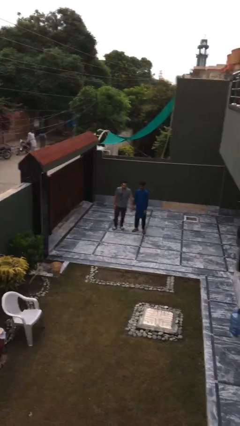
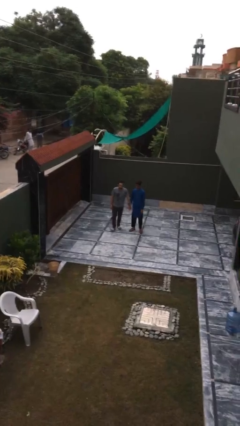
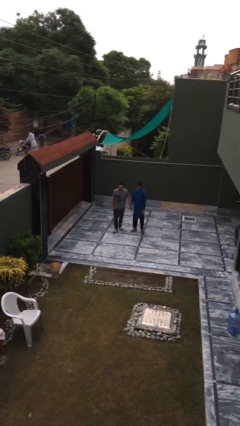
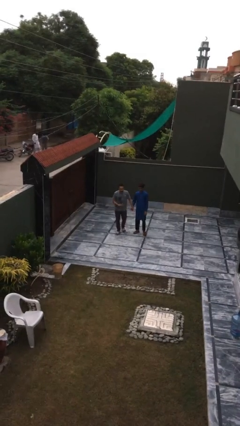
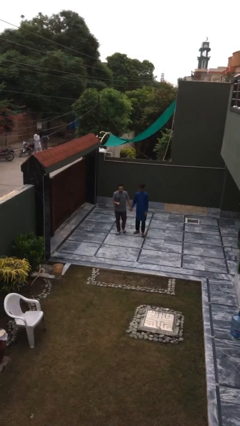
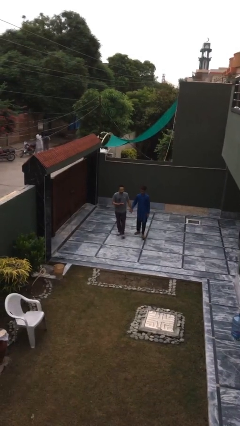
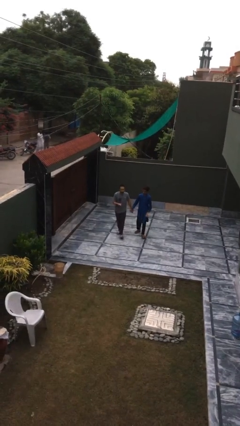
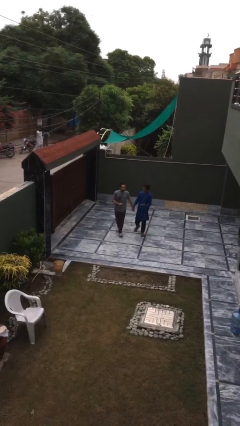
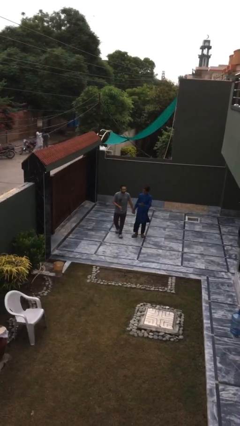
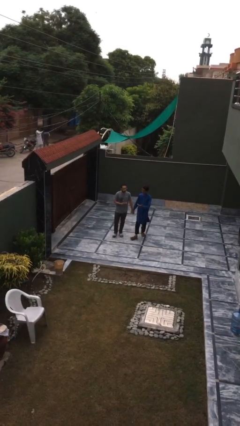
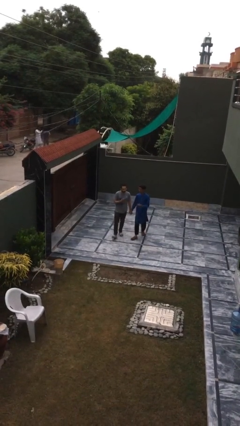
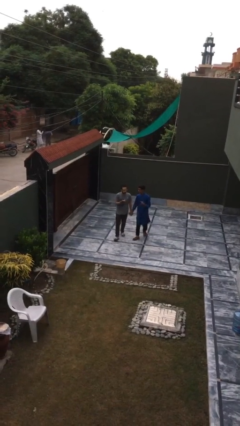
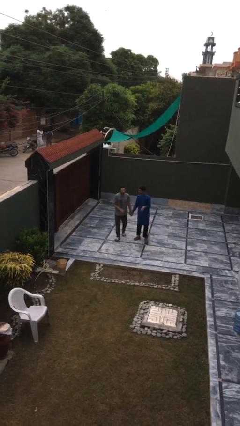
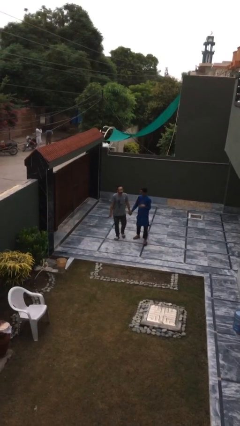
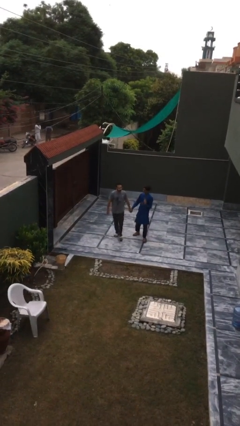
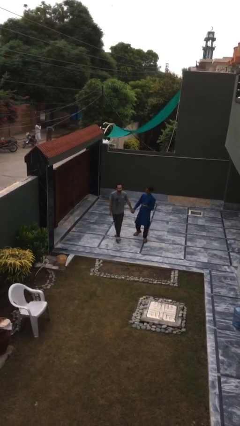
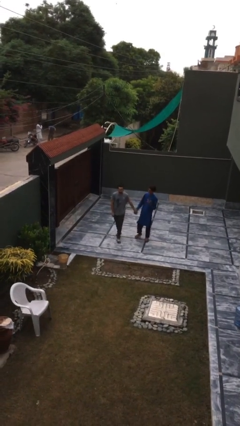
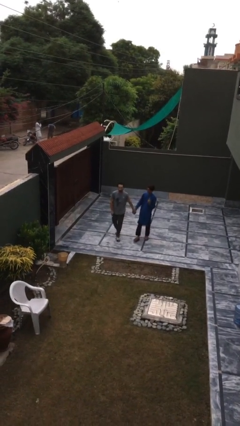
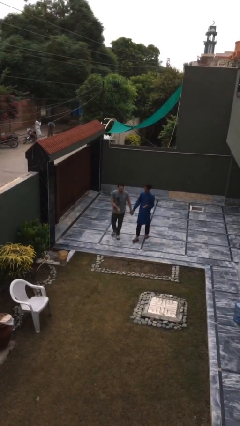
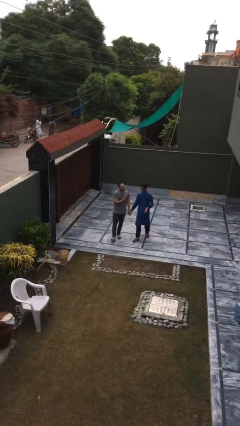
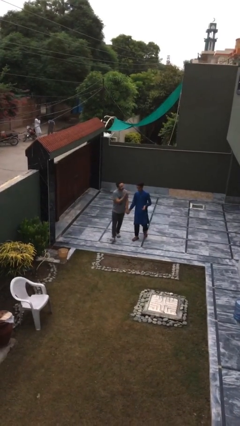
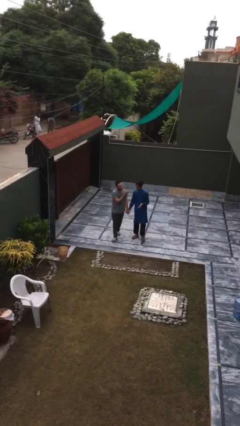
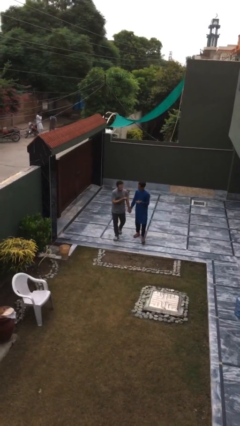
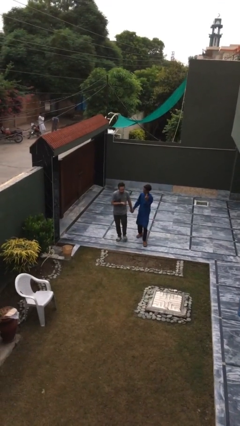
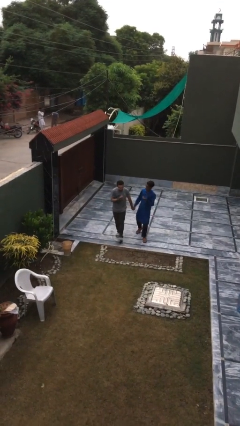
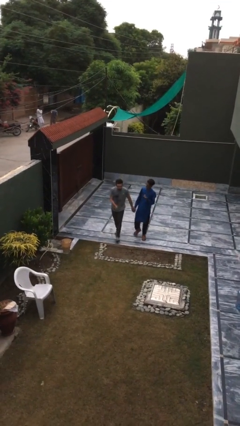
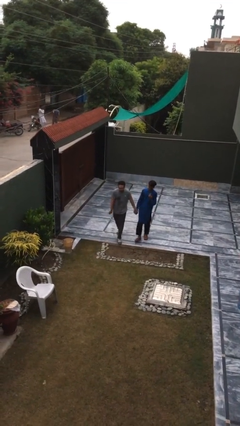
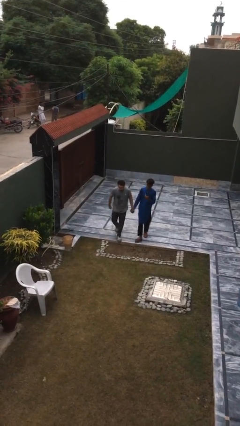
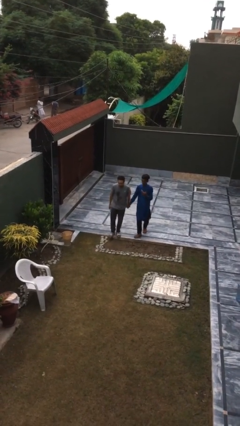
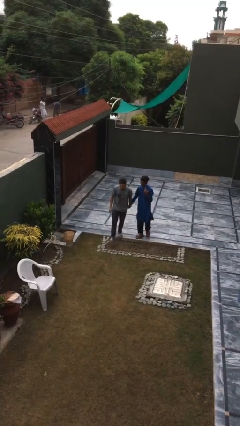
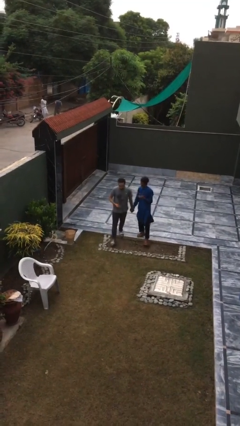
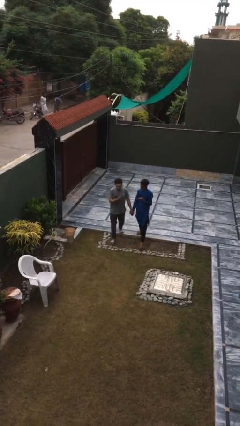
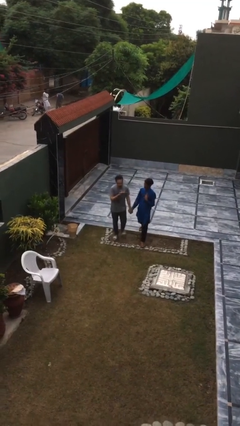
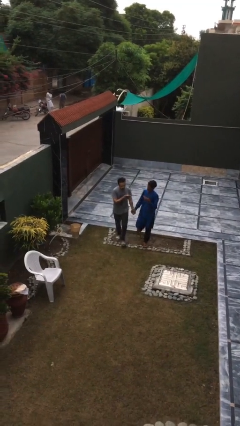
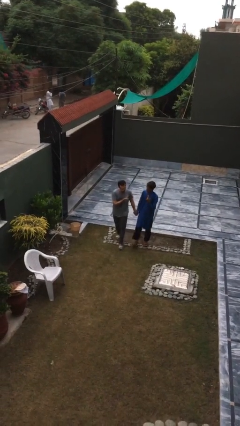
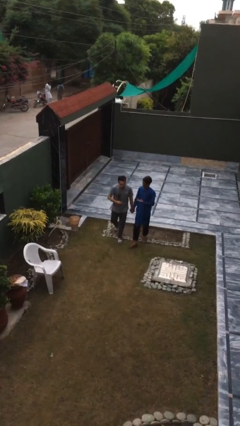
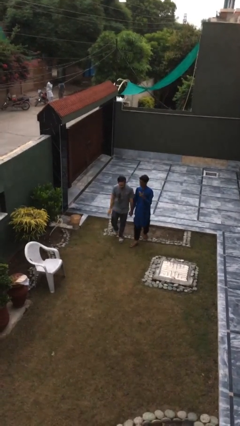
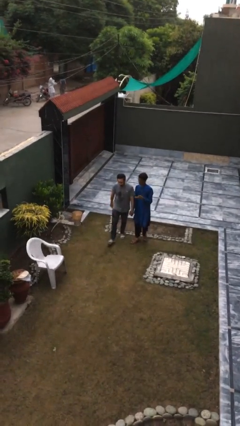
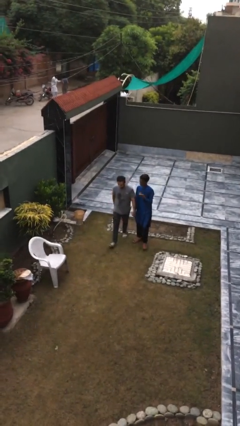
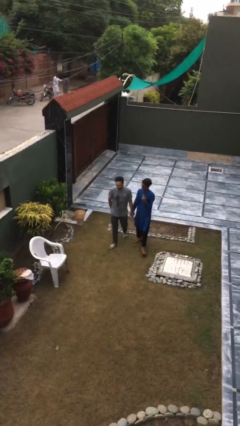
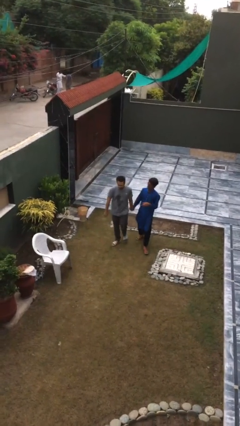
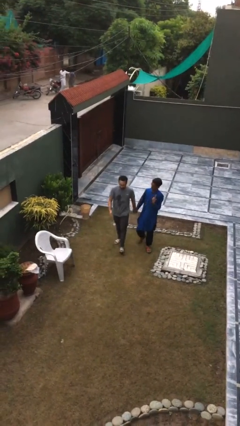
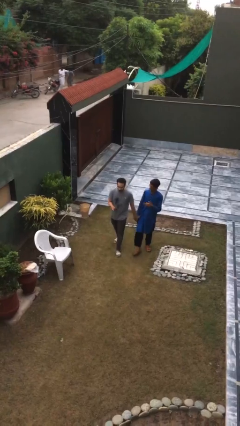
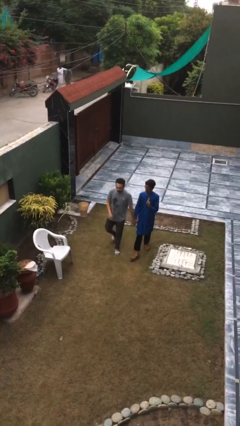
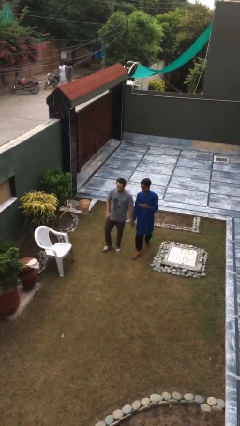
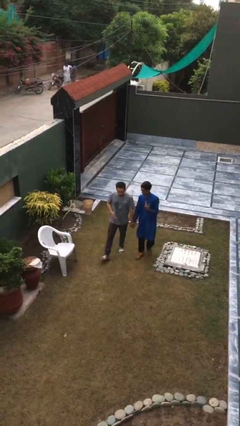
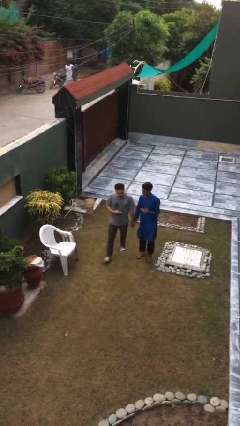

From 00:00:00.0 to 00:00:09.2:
person holds hand

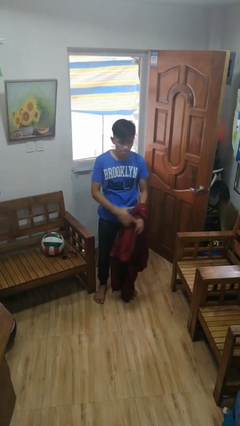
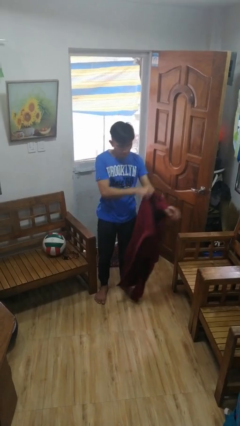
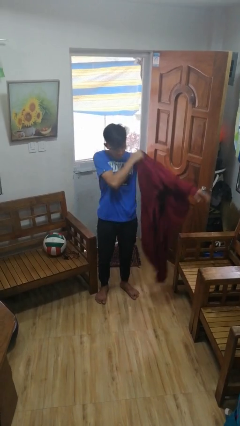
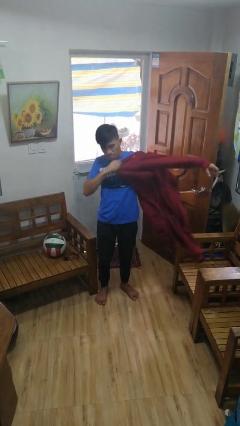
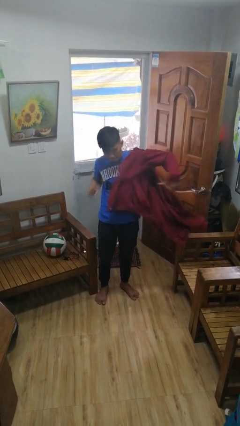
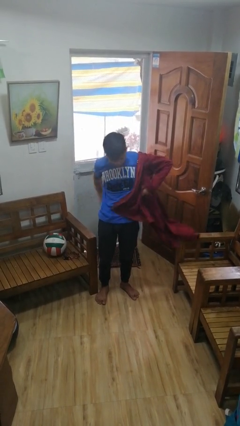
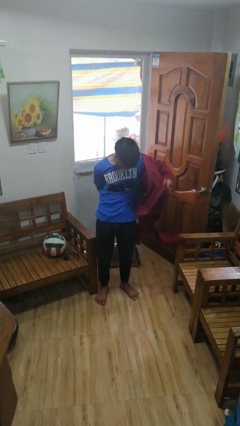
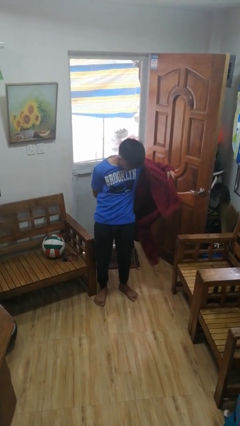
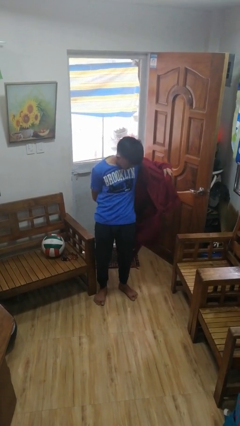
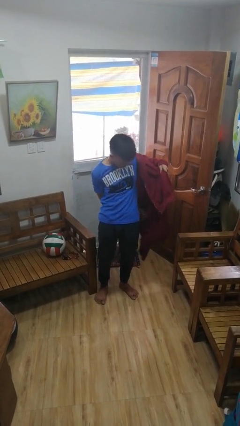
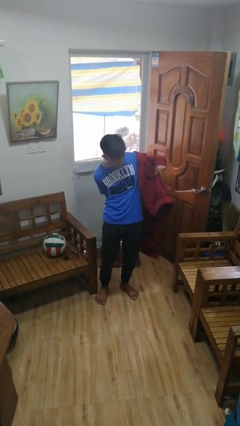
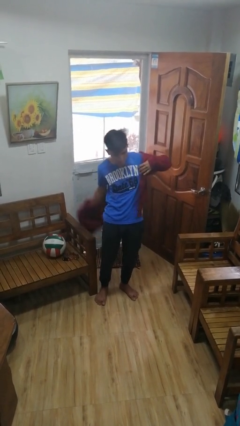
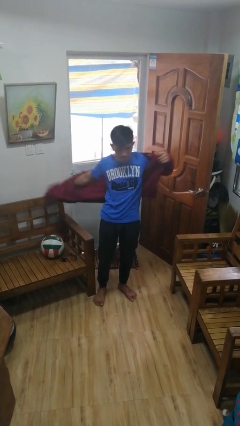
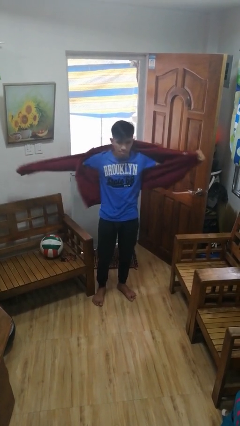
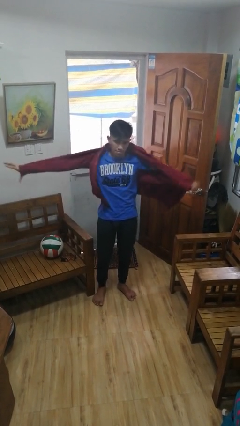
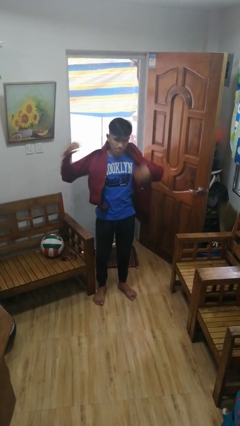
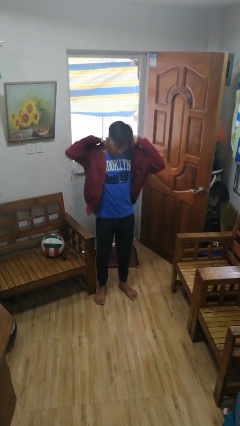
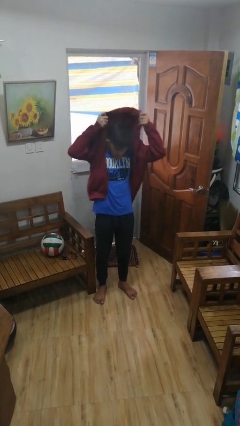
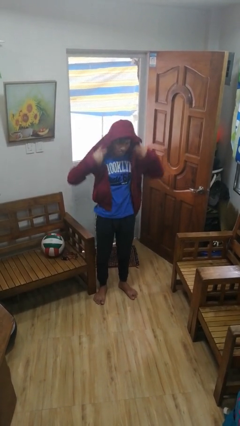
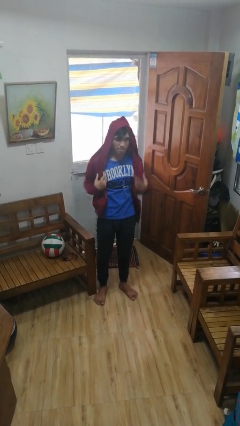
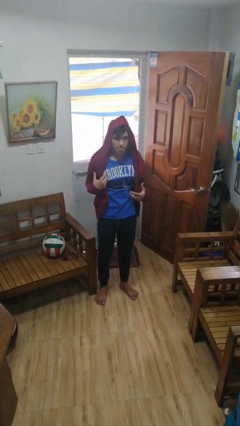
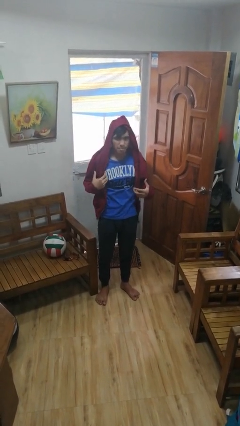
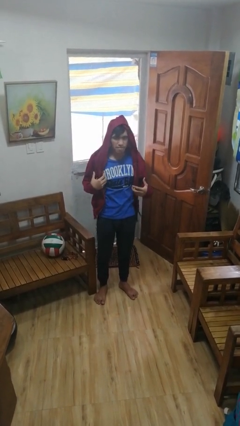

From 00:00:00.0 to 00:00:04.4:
person puts on hoodie

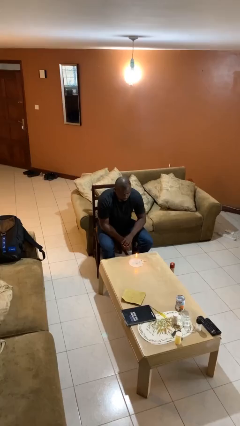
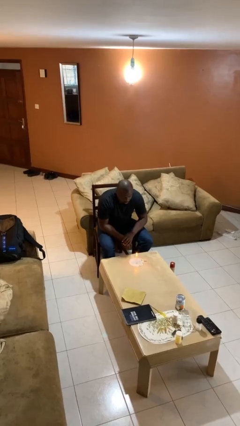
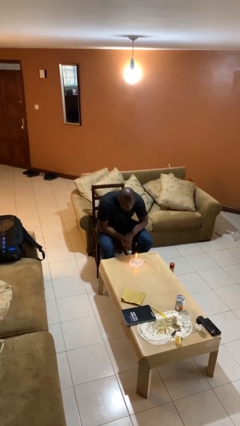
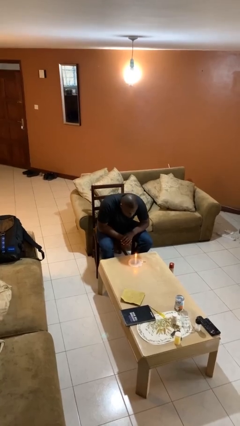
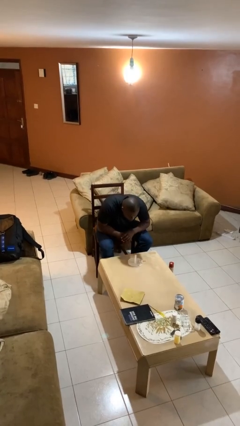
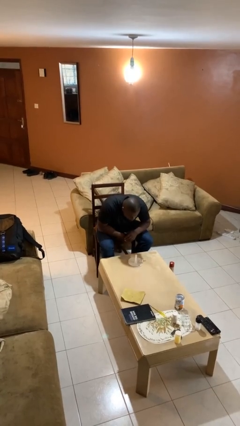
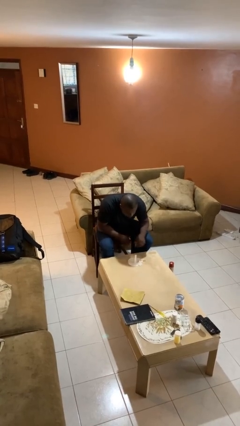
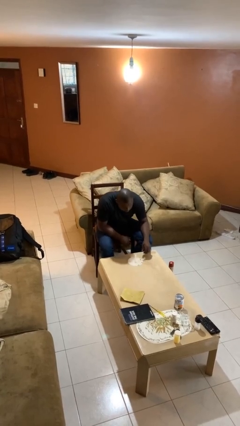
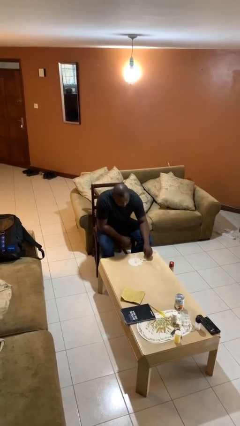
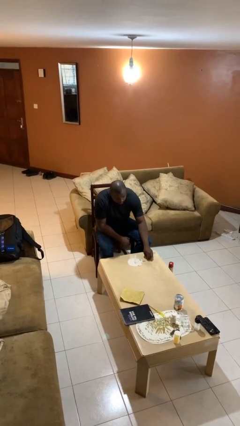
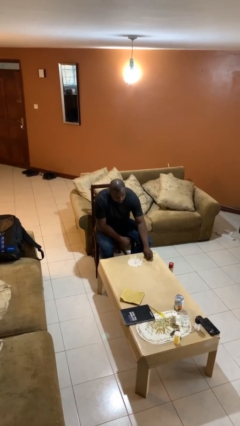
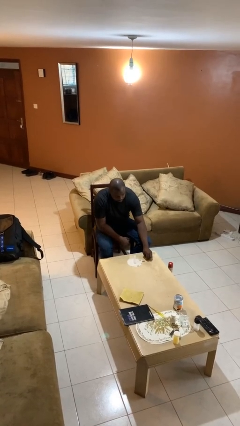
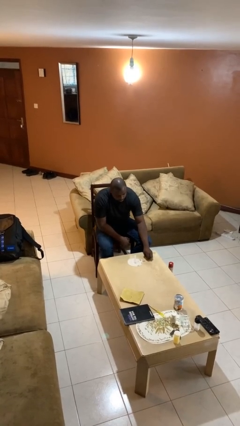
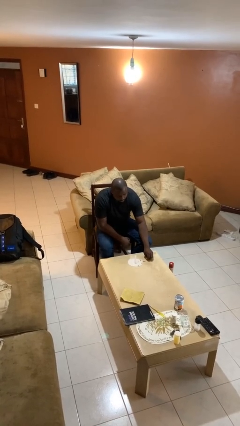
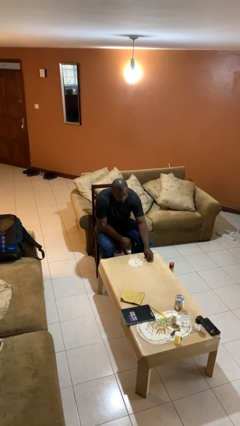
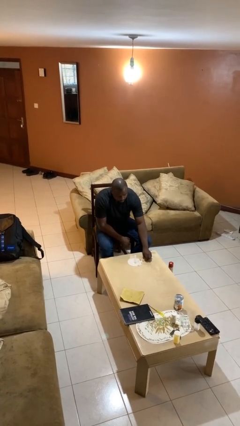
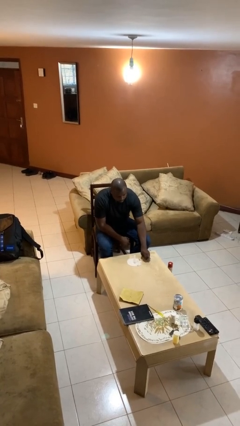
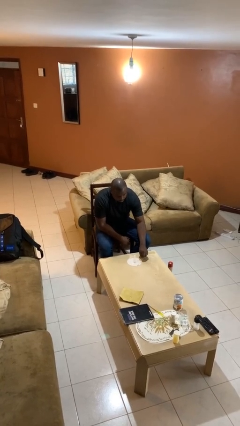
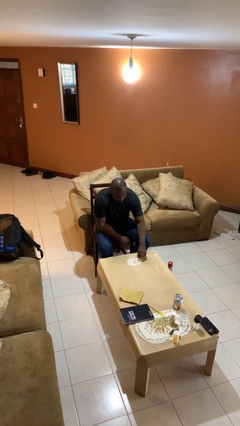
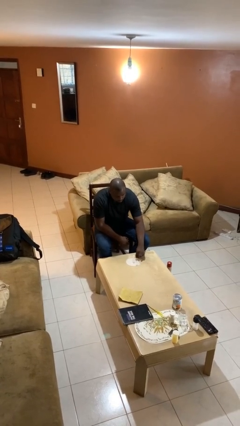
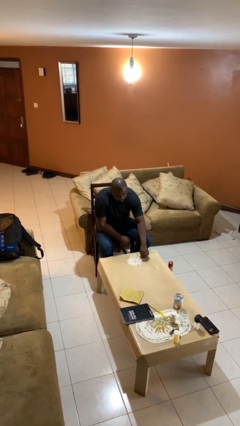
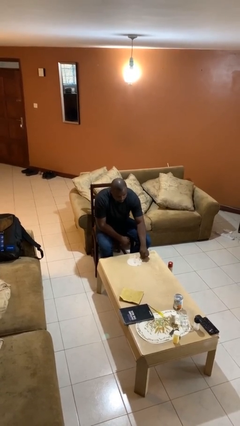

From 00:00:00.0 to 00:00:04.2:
person extinguishes candle

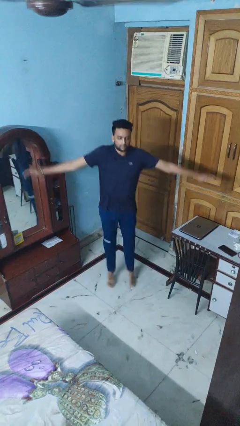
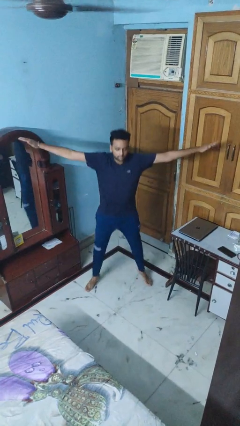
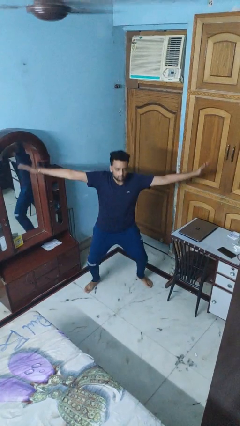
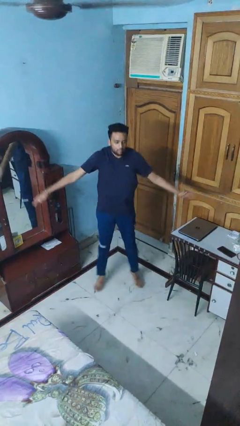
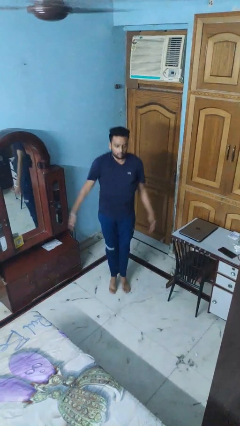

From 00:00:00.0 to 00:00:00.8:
person exercises with jumping jacks
